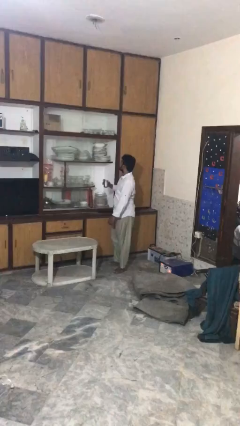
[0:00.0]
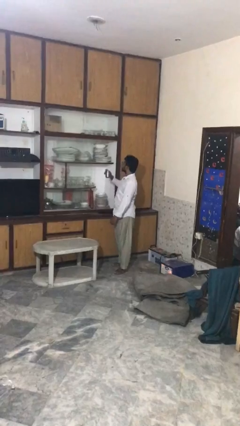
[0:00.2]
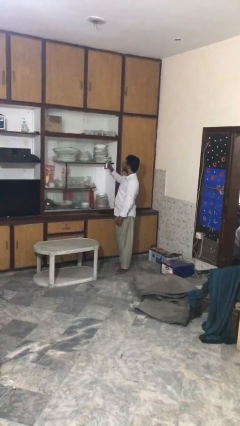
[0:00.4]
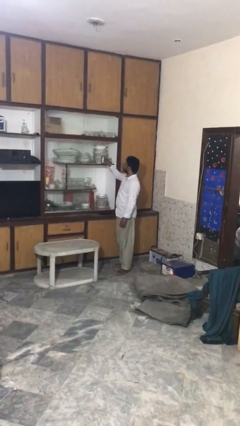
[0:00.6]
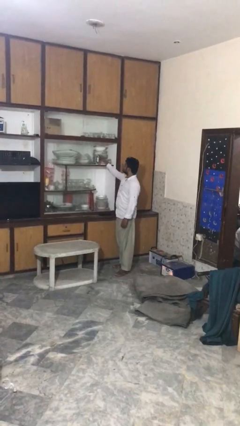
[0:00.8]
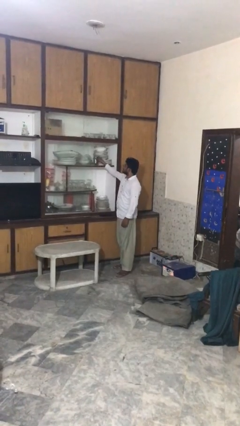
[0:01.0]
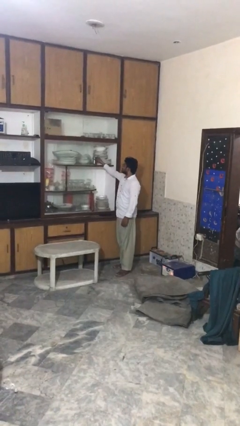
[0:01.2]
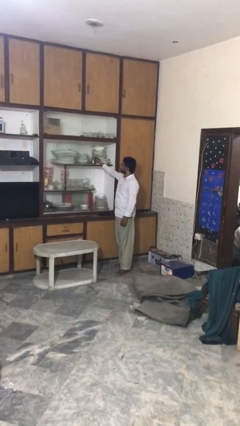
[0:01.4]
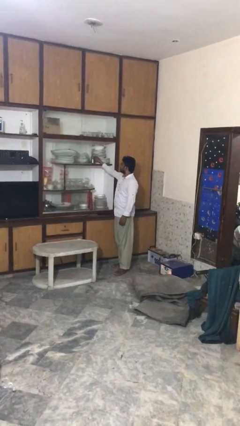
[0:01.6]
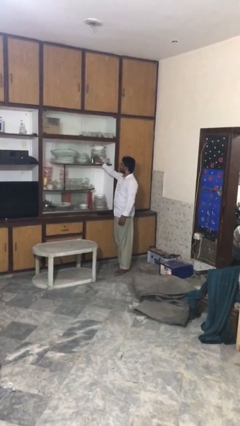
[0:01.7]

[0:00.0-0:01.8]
person puts down object on shelf

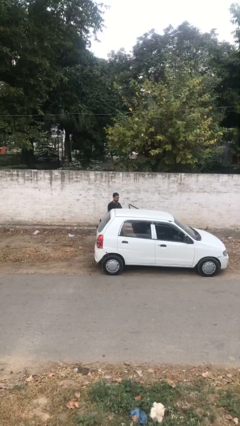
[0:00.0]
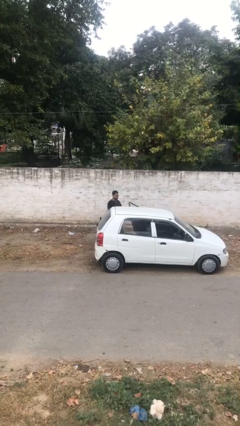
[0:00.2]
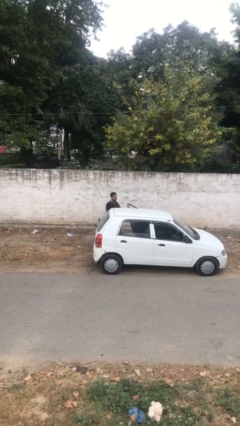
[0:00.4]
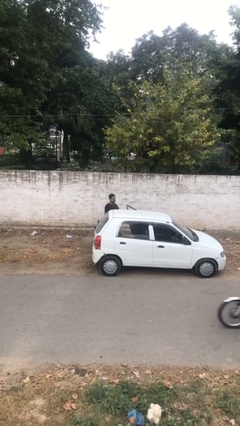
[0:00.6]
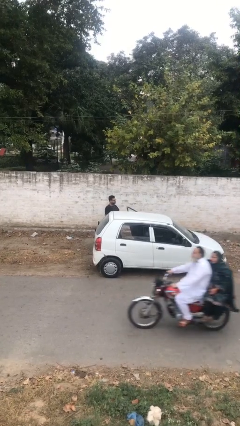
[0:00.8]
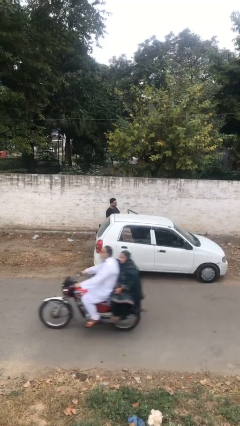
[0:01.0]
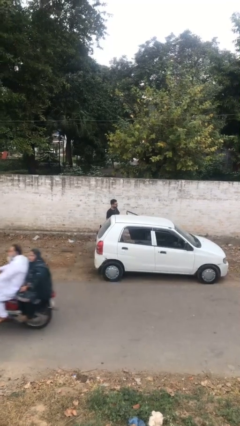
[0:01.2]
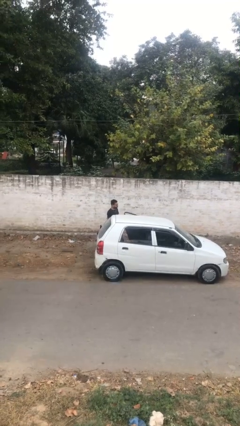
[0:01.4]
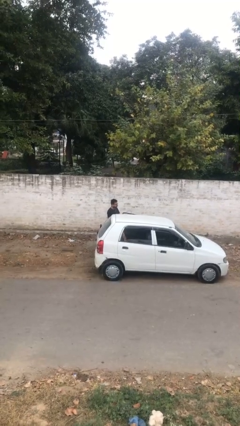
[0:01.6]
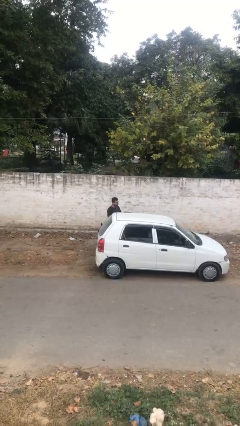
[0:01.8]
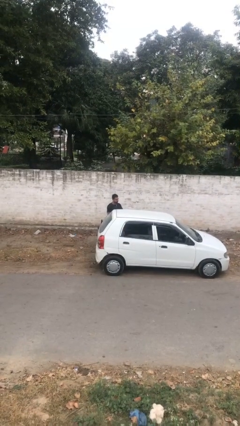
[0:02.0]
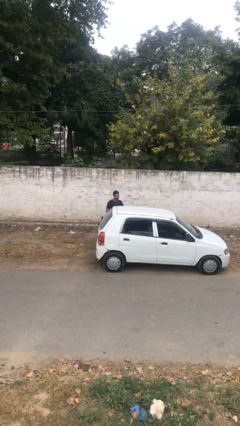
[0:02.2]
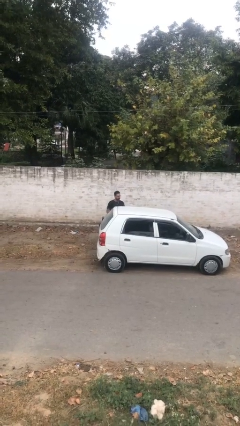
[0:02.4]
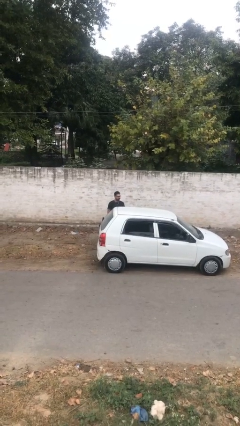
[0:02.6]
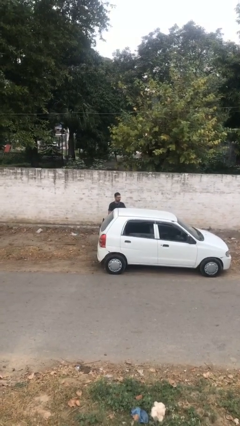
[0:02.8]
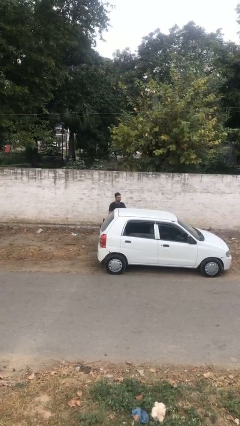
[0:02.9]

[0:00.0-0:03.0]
person closes car door

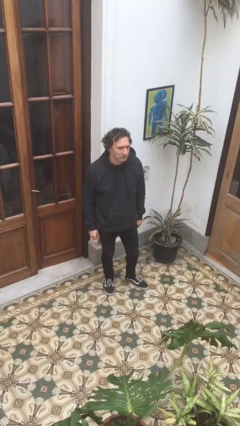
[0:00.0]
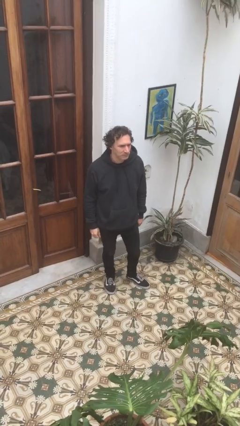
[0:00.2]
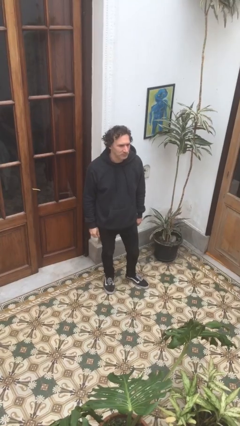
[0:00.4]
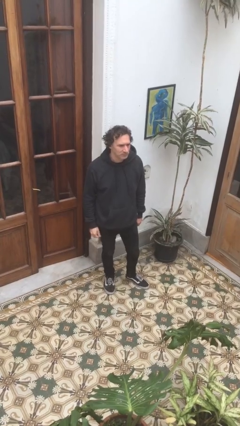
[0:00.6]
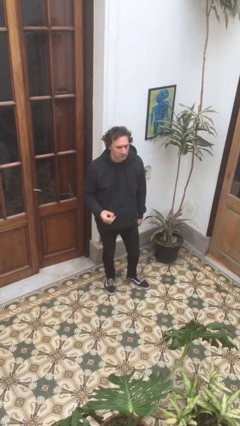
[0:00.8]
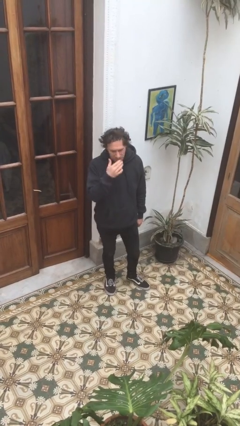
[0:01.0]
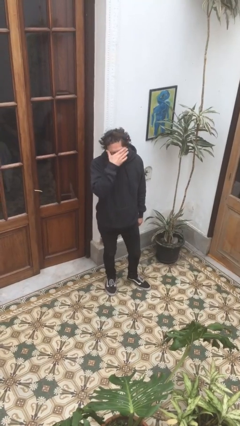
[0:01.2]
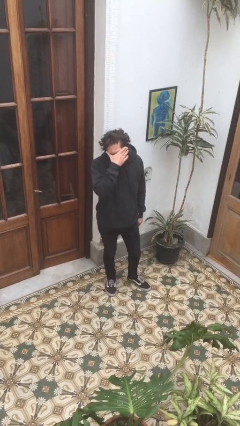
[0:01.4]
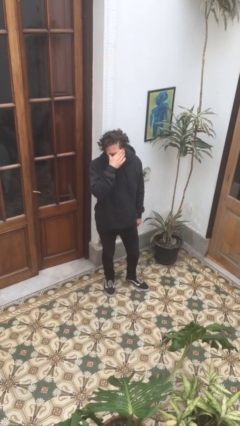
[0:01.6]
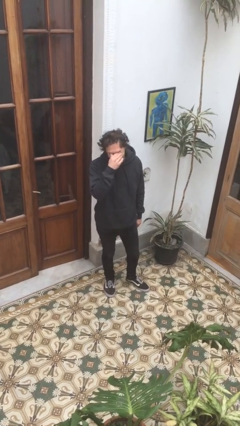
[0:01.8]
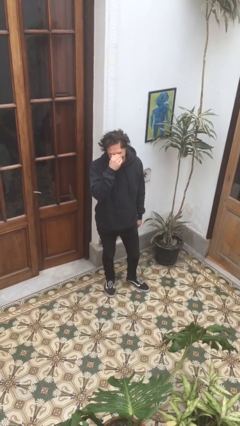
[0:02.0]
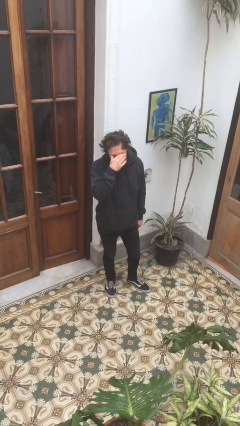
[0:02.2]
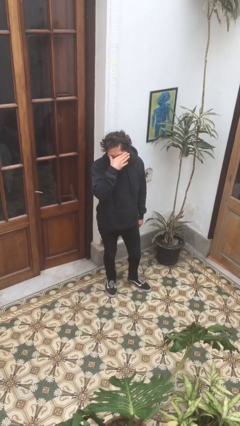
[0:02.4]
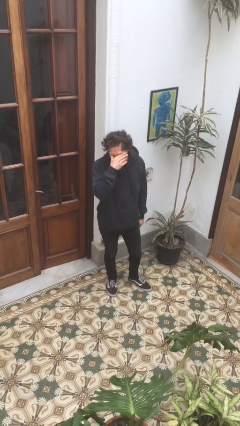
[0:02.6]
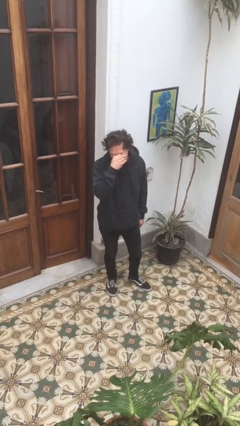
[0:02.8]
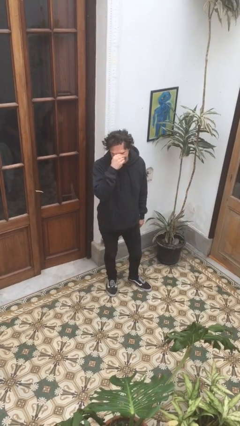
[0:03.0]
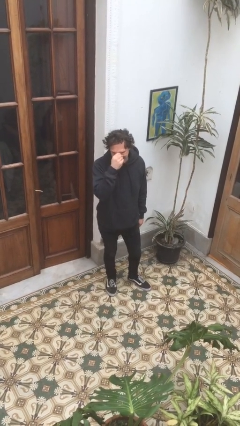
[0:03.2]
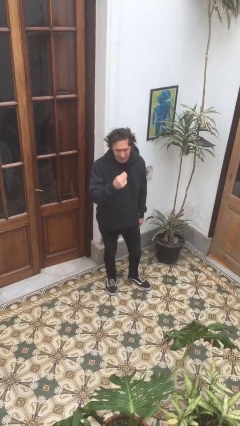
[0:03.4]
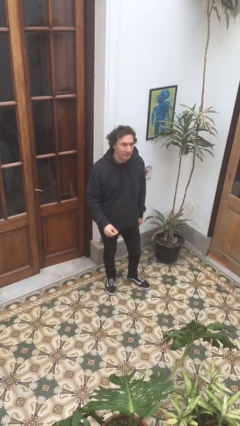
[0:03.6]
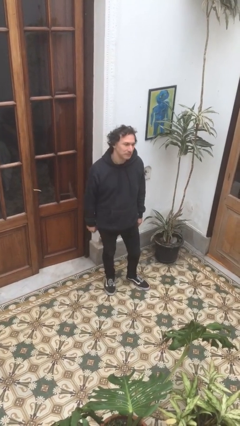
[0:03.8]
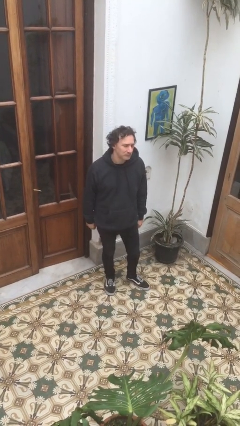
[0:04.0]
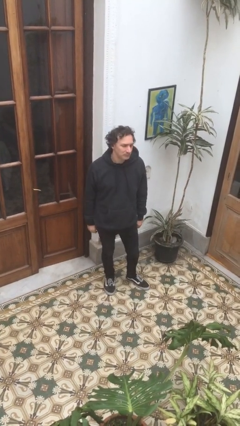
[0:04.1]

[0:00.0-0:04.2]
person rubs eyes

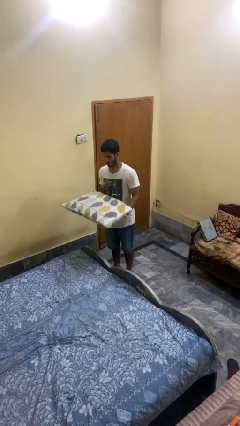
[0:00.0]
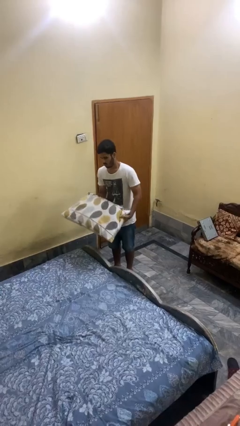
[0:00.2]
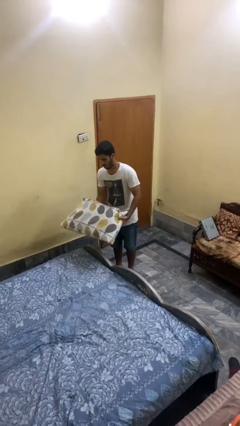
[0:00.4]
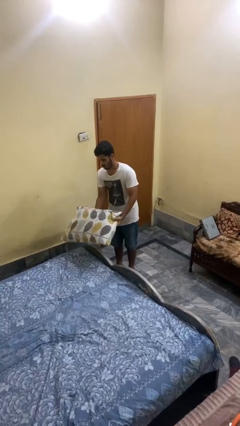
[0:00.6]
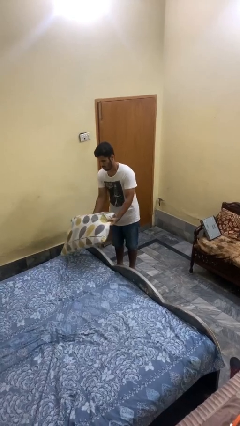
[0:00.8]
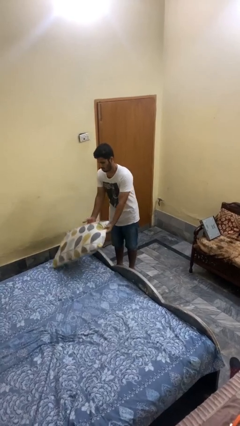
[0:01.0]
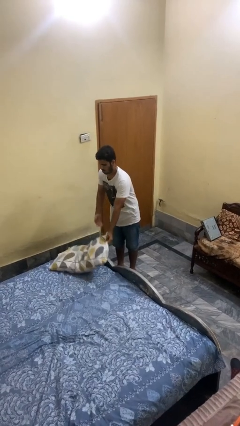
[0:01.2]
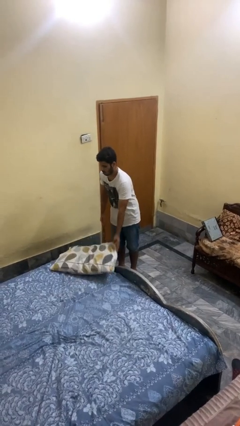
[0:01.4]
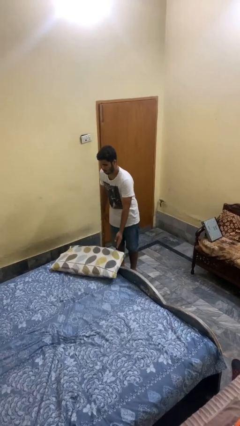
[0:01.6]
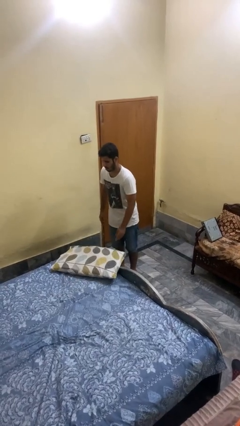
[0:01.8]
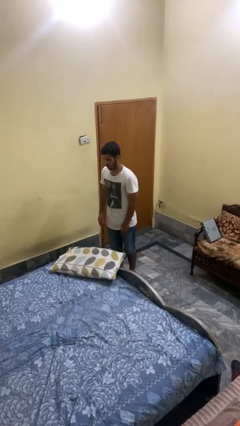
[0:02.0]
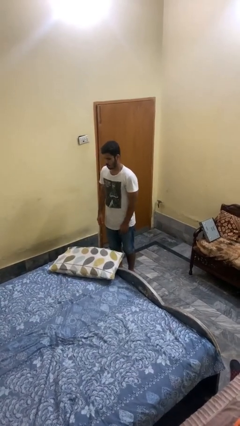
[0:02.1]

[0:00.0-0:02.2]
person puts down object on bed

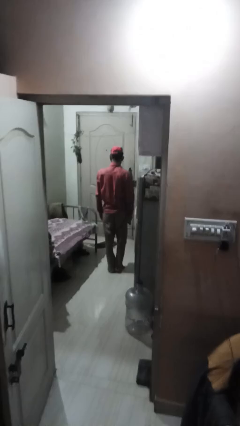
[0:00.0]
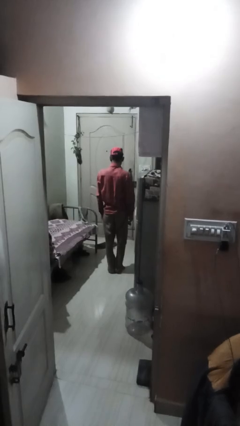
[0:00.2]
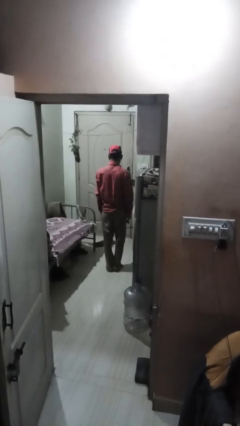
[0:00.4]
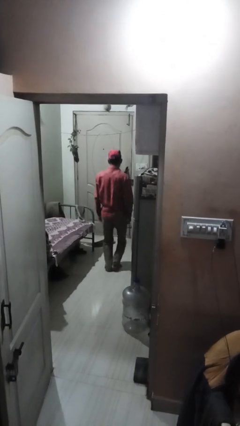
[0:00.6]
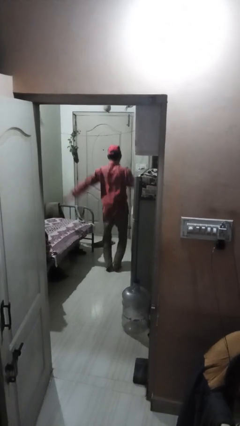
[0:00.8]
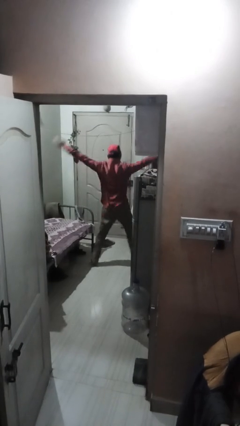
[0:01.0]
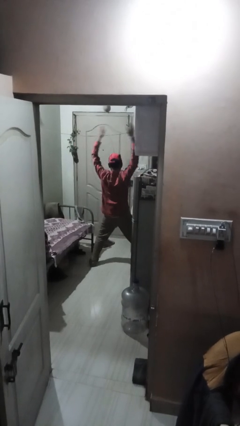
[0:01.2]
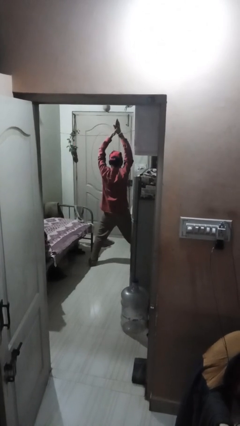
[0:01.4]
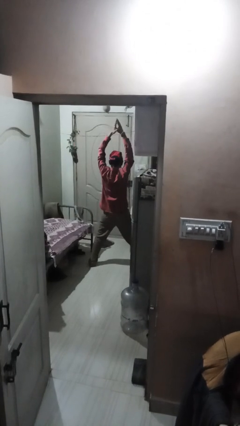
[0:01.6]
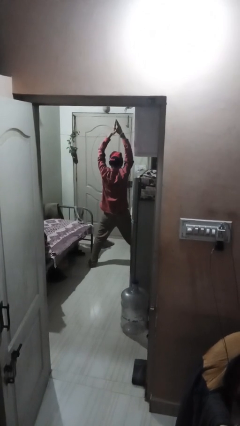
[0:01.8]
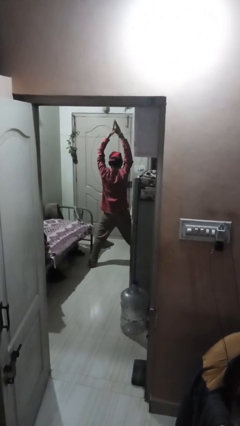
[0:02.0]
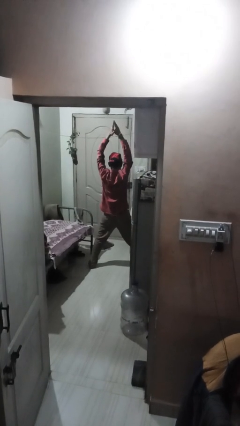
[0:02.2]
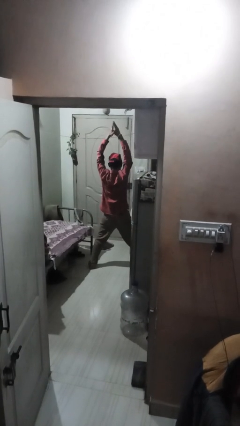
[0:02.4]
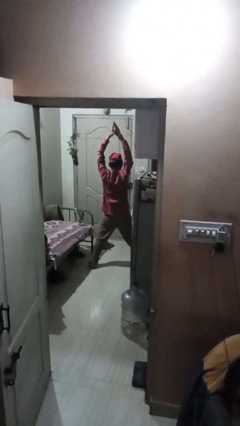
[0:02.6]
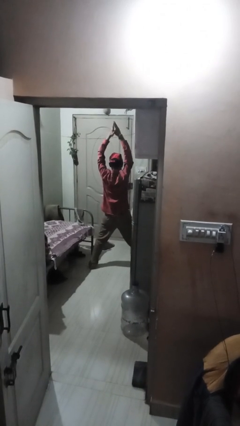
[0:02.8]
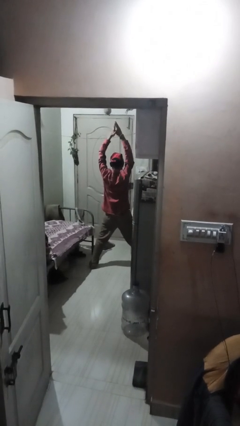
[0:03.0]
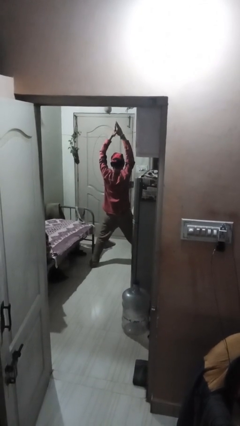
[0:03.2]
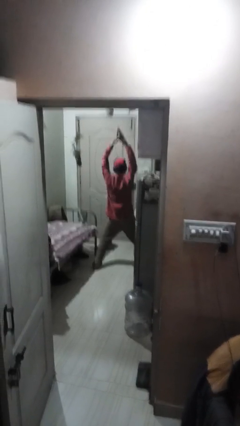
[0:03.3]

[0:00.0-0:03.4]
person exercises with jumping jacks

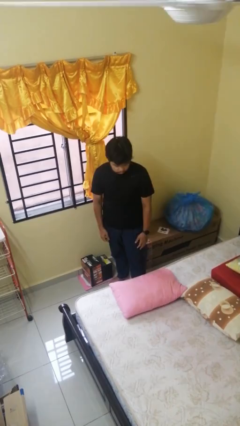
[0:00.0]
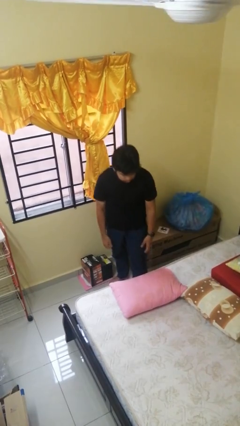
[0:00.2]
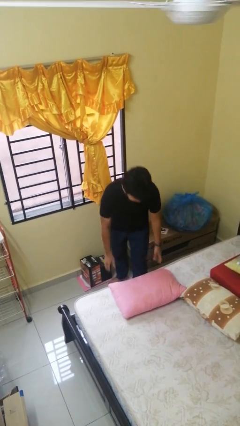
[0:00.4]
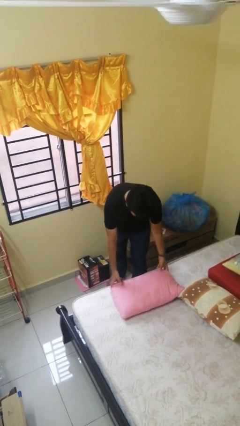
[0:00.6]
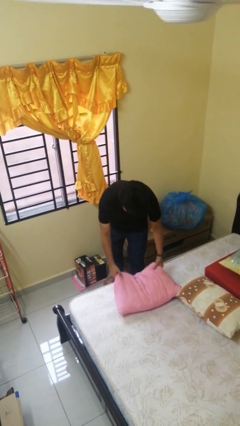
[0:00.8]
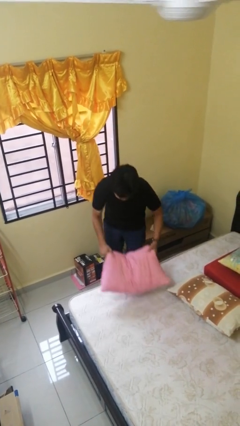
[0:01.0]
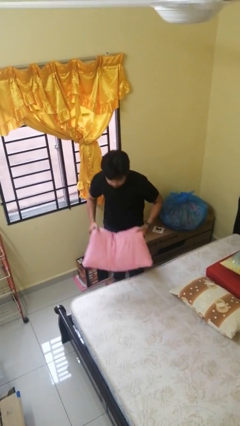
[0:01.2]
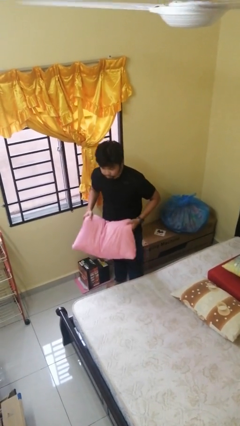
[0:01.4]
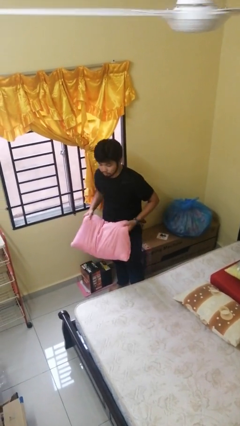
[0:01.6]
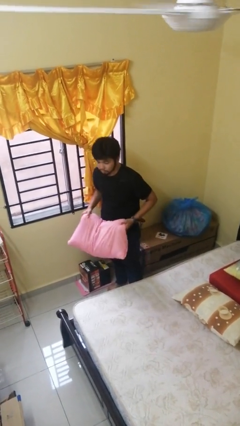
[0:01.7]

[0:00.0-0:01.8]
person picks up object from bed

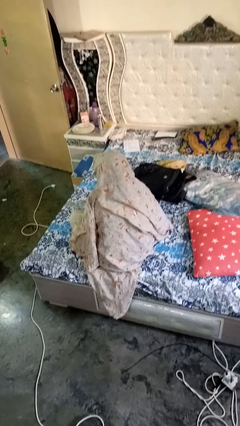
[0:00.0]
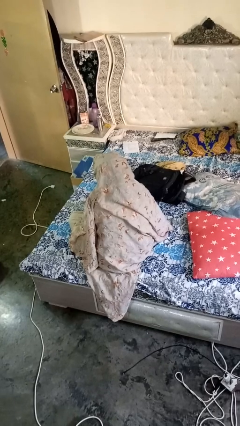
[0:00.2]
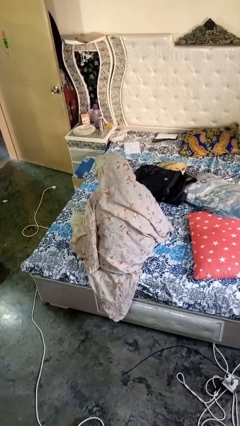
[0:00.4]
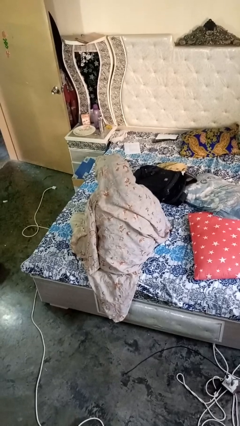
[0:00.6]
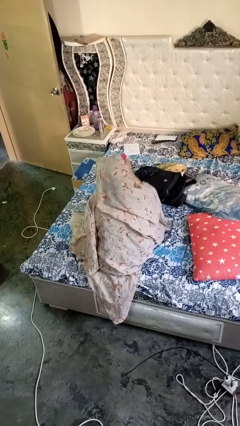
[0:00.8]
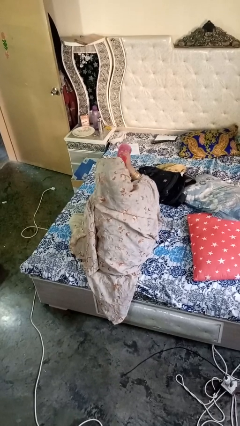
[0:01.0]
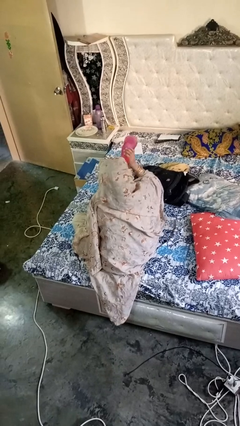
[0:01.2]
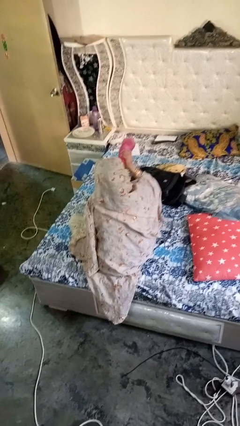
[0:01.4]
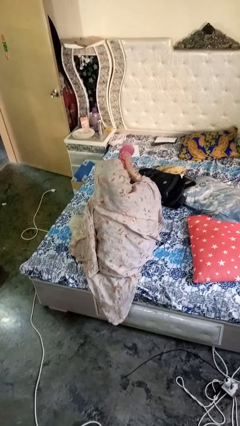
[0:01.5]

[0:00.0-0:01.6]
person drinks from bottle
